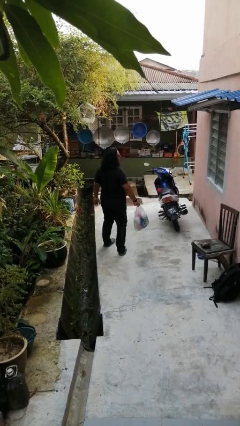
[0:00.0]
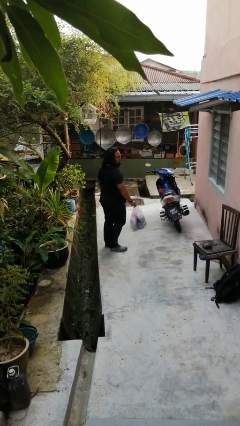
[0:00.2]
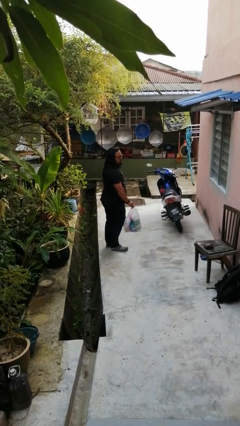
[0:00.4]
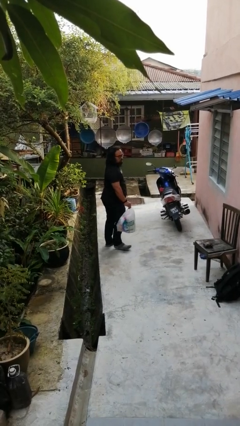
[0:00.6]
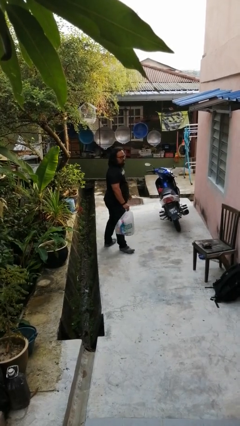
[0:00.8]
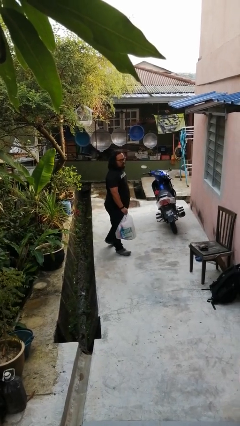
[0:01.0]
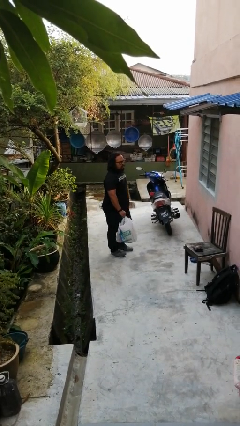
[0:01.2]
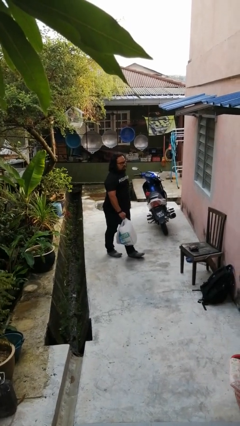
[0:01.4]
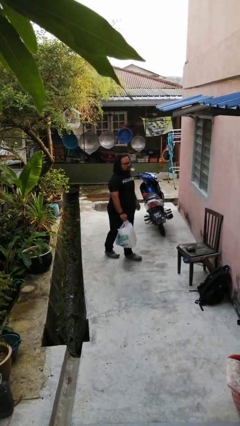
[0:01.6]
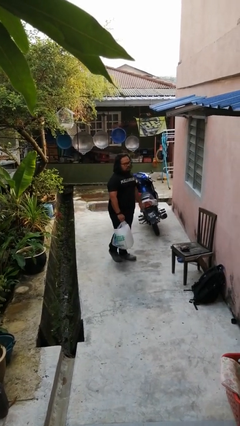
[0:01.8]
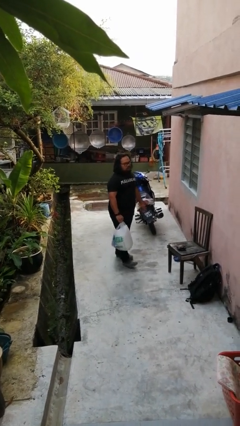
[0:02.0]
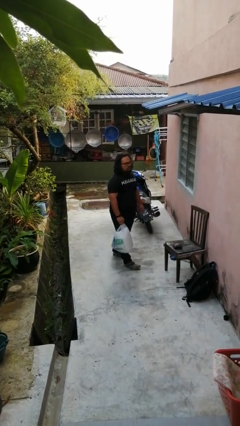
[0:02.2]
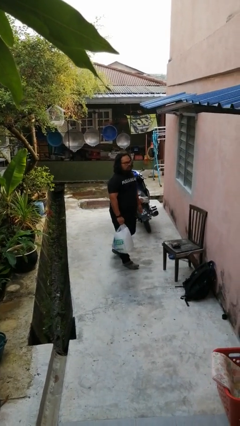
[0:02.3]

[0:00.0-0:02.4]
person carries groceries

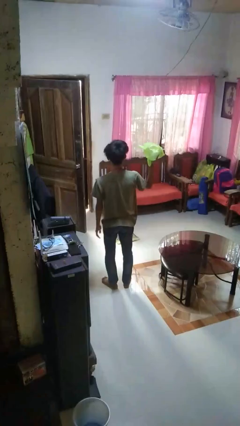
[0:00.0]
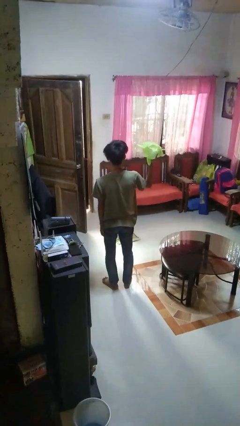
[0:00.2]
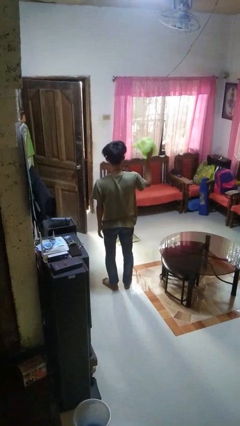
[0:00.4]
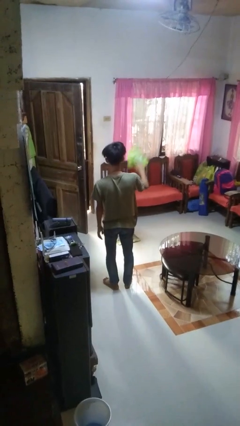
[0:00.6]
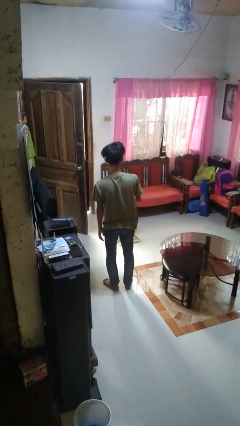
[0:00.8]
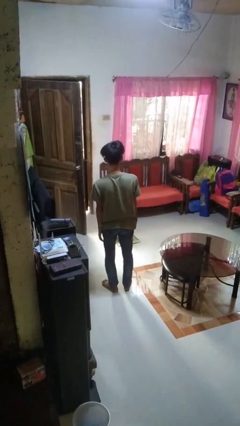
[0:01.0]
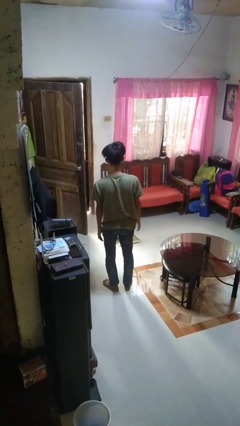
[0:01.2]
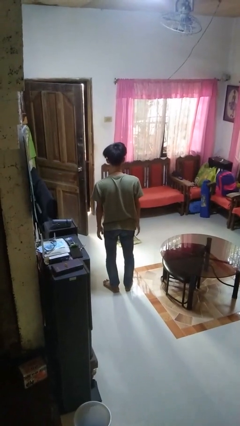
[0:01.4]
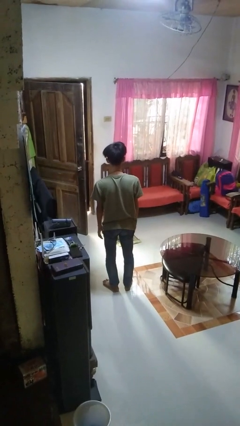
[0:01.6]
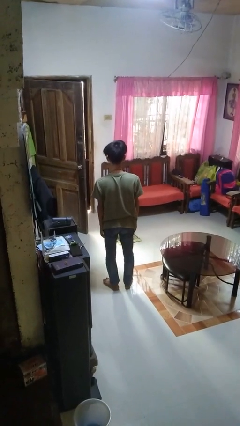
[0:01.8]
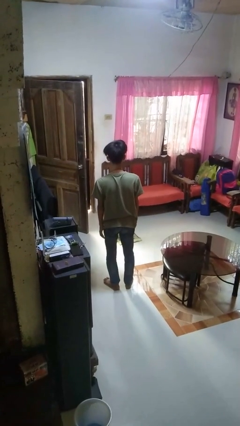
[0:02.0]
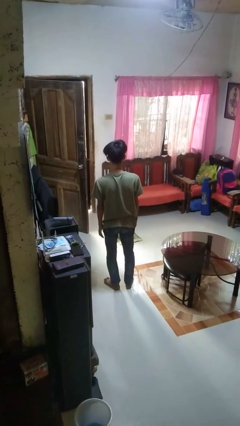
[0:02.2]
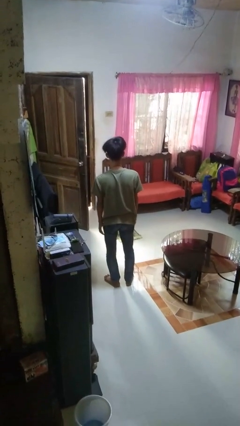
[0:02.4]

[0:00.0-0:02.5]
person throws object to ground

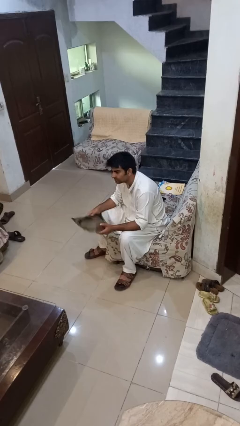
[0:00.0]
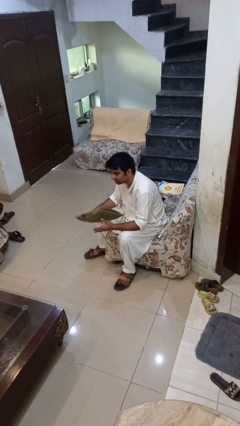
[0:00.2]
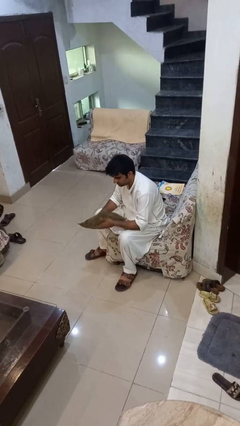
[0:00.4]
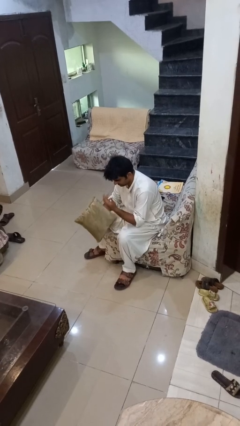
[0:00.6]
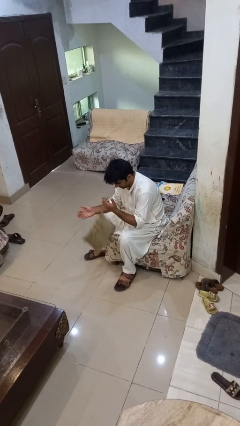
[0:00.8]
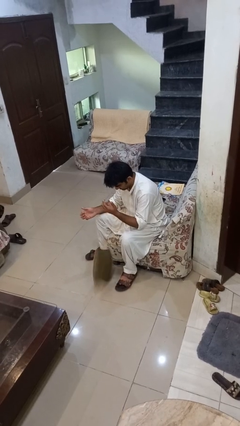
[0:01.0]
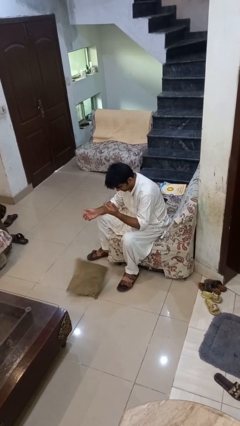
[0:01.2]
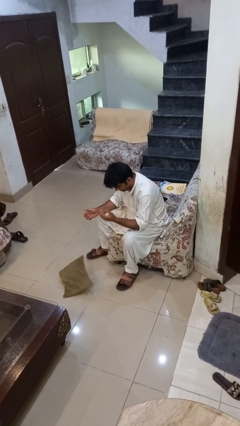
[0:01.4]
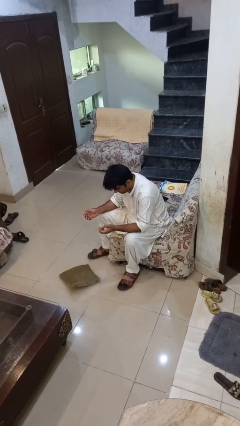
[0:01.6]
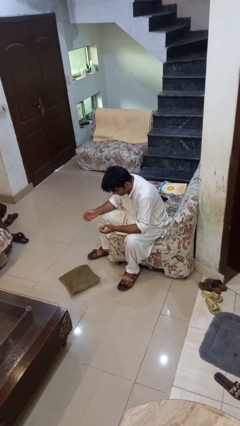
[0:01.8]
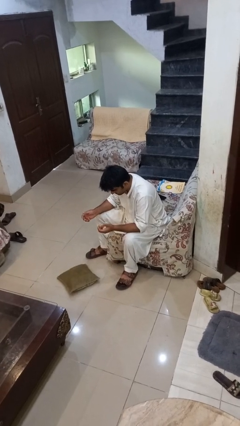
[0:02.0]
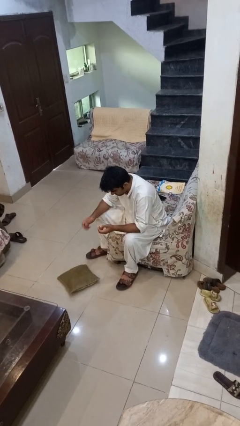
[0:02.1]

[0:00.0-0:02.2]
person drops object

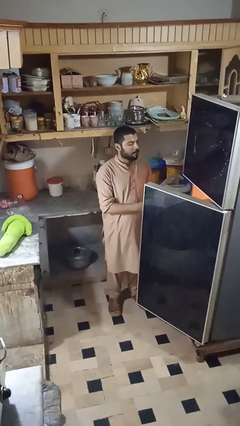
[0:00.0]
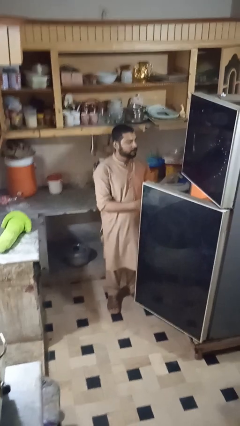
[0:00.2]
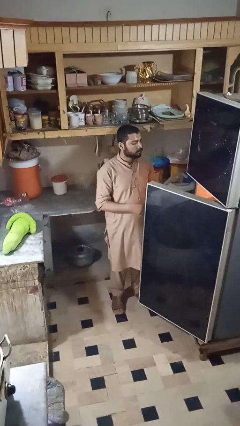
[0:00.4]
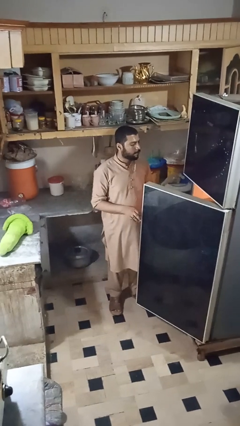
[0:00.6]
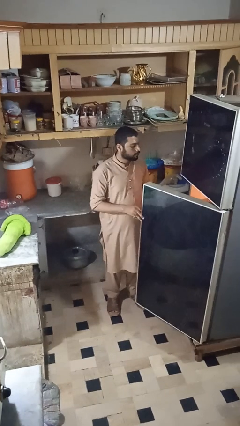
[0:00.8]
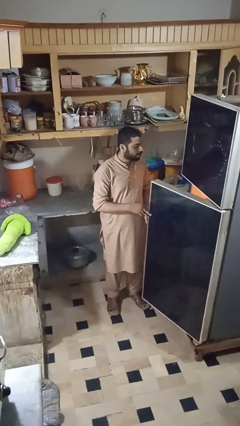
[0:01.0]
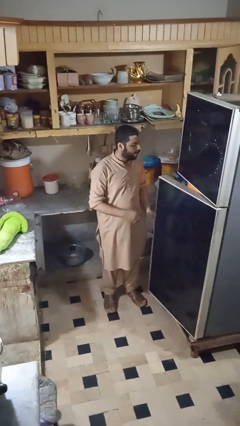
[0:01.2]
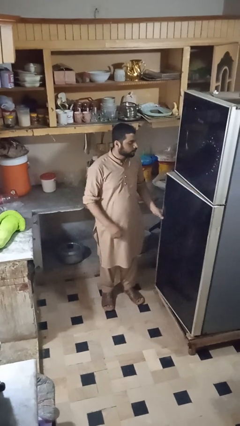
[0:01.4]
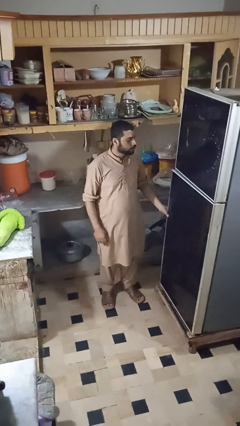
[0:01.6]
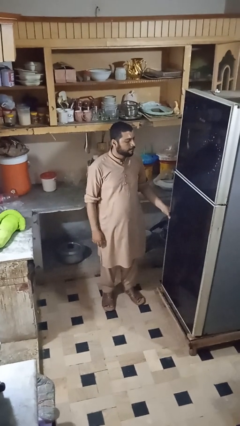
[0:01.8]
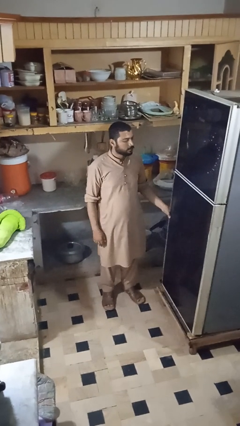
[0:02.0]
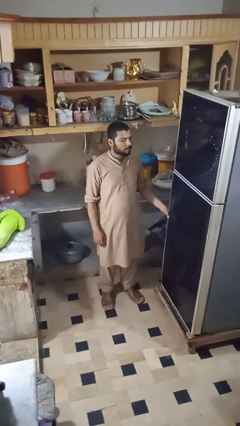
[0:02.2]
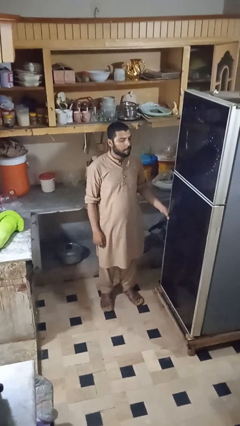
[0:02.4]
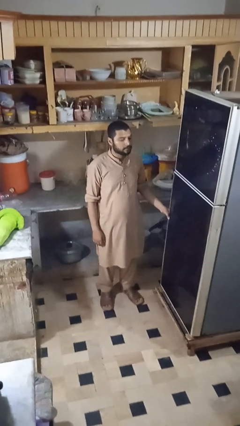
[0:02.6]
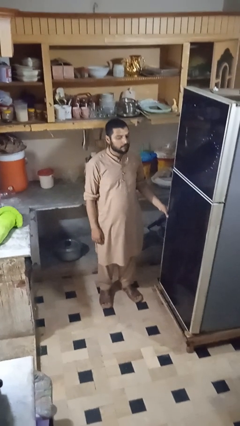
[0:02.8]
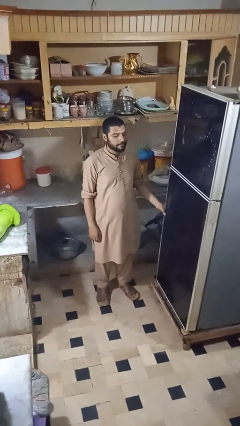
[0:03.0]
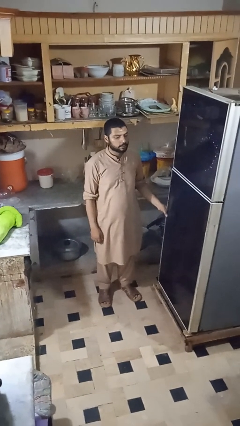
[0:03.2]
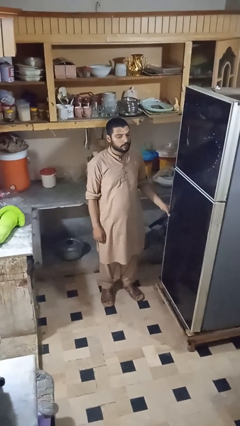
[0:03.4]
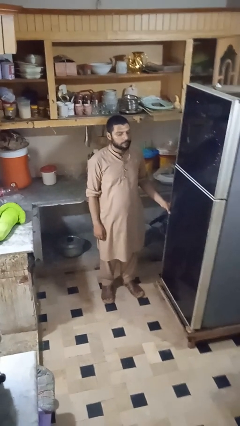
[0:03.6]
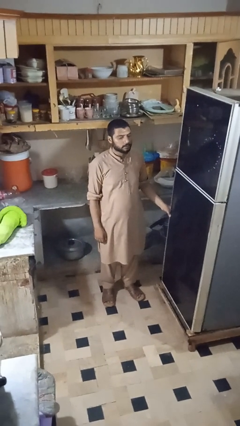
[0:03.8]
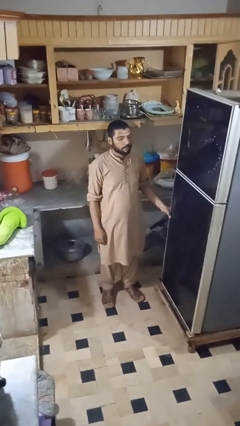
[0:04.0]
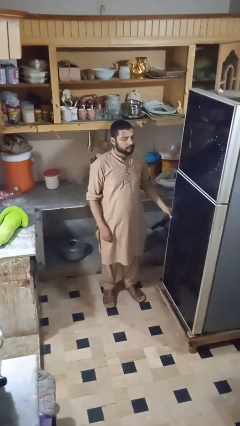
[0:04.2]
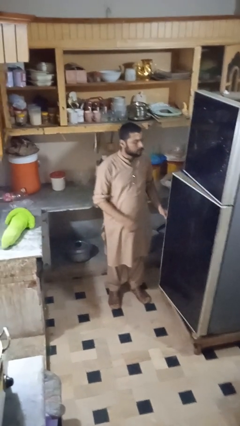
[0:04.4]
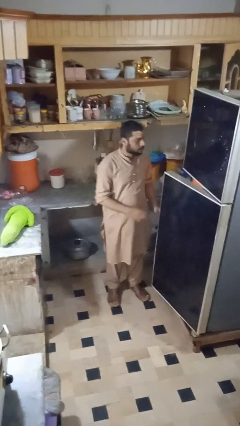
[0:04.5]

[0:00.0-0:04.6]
person closes refrigerator

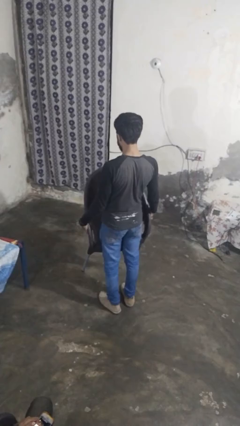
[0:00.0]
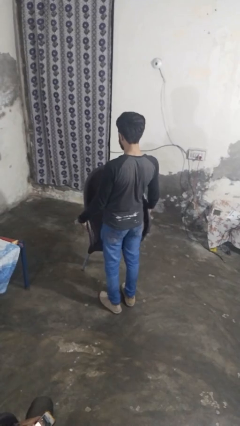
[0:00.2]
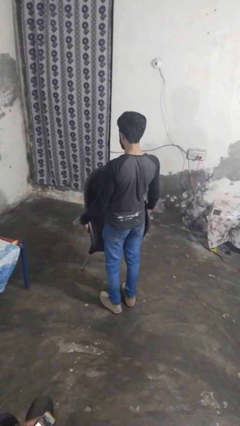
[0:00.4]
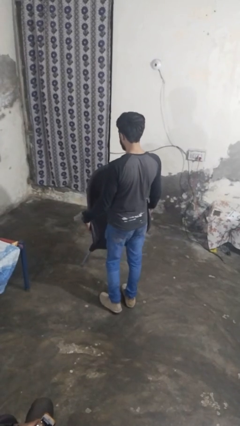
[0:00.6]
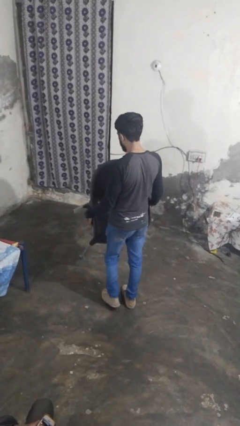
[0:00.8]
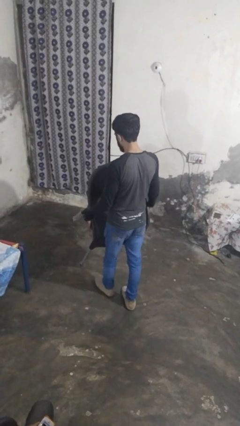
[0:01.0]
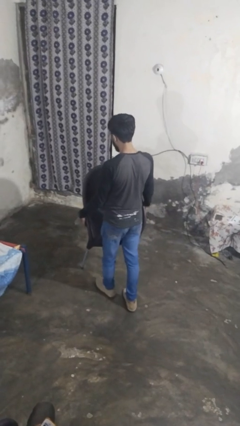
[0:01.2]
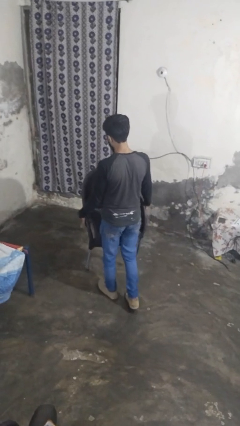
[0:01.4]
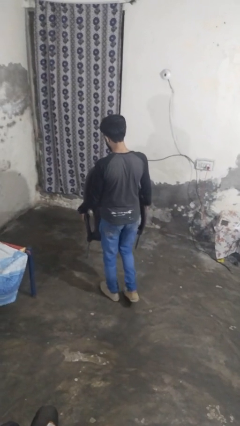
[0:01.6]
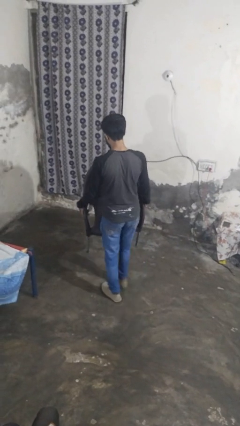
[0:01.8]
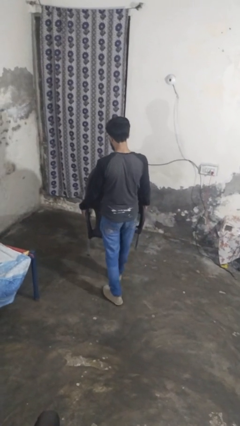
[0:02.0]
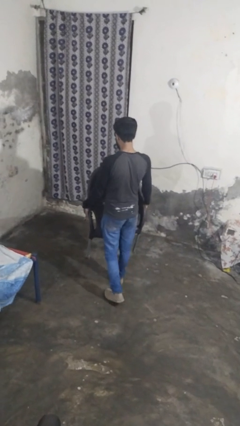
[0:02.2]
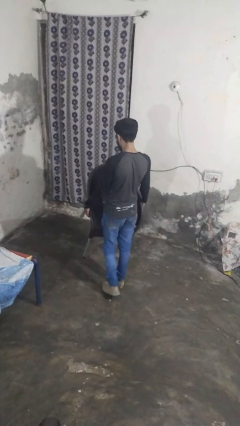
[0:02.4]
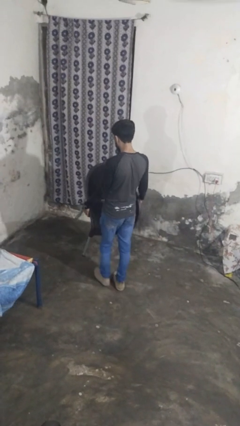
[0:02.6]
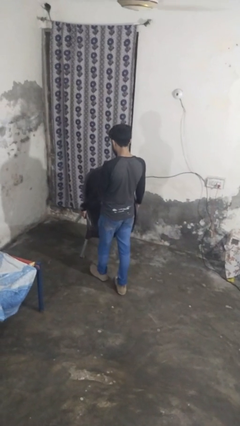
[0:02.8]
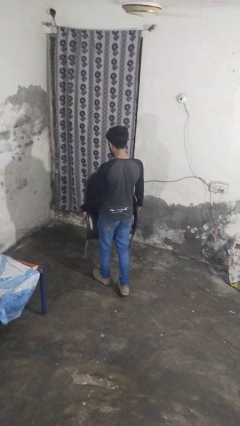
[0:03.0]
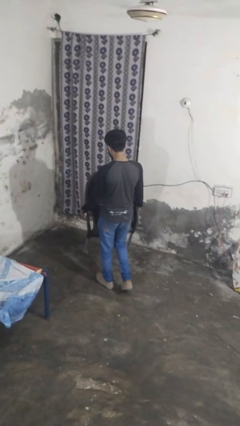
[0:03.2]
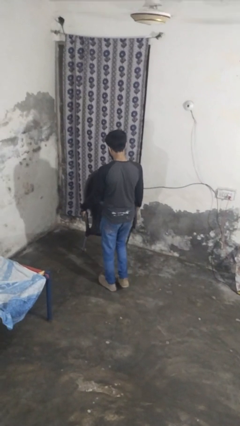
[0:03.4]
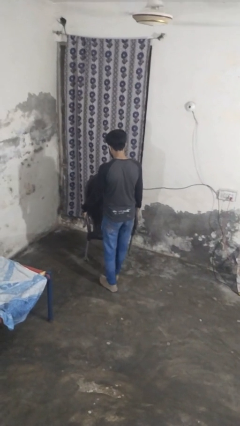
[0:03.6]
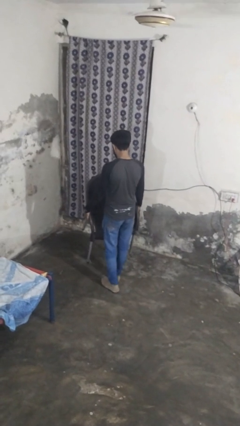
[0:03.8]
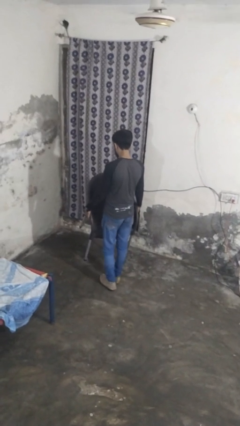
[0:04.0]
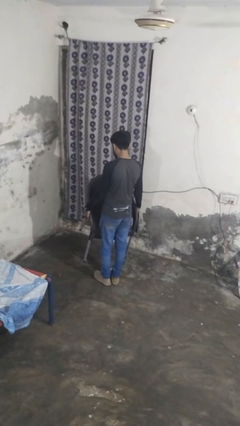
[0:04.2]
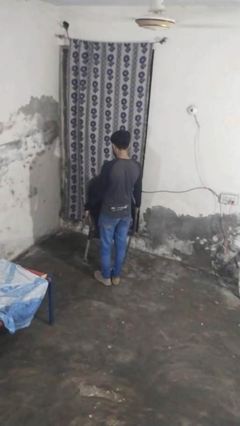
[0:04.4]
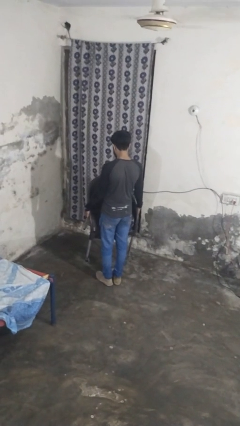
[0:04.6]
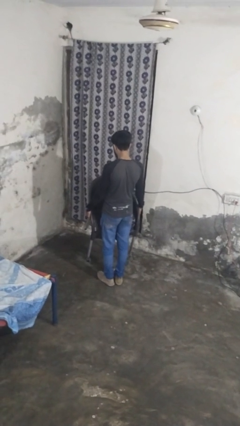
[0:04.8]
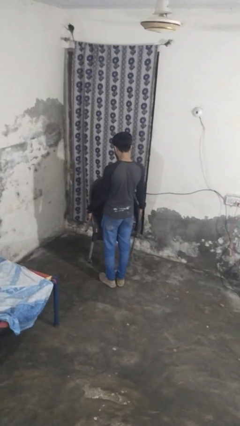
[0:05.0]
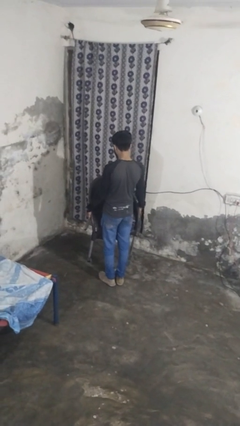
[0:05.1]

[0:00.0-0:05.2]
person carries furniture

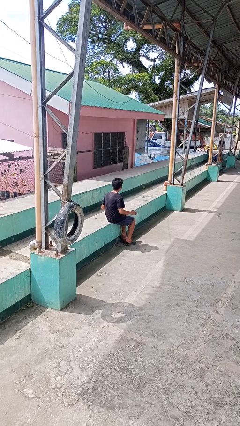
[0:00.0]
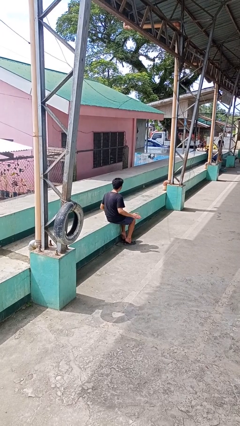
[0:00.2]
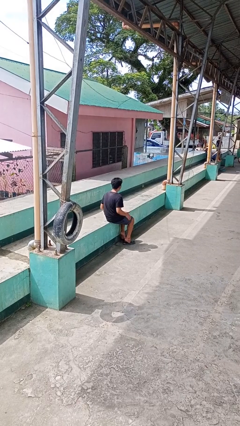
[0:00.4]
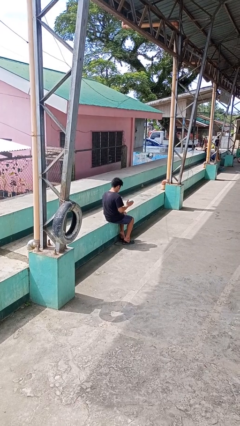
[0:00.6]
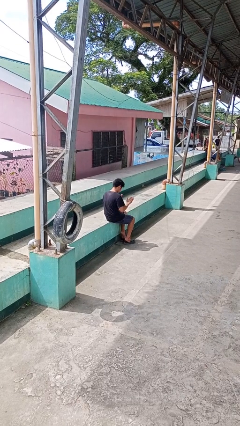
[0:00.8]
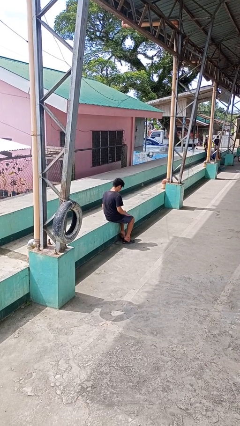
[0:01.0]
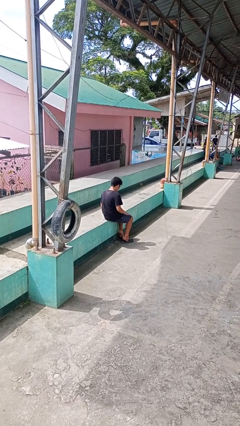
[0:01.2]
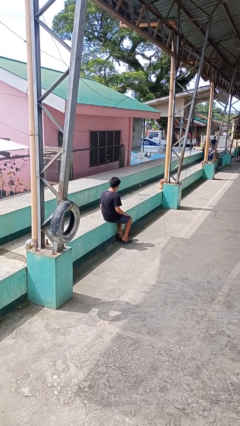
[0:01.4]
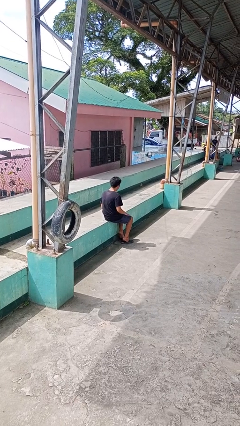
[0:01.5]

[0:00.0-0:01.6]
person slaps hands on thighs
